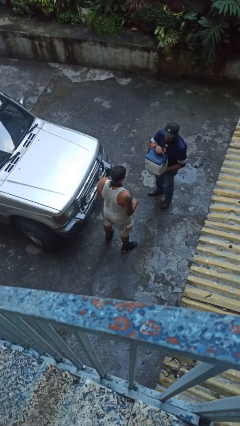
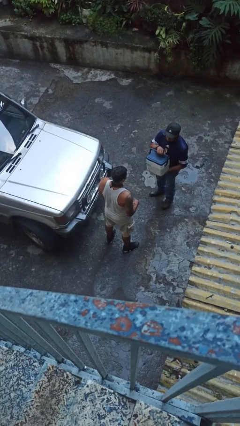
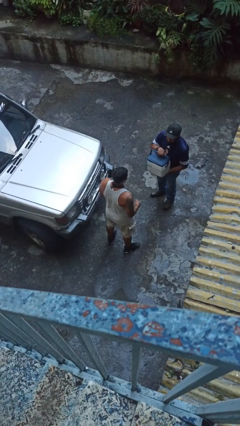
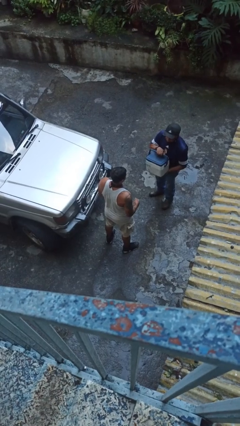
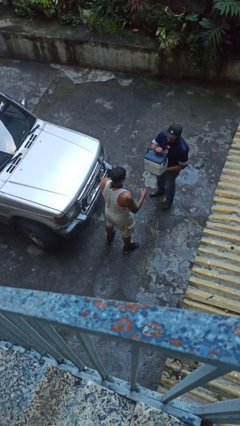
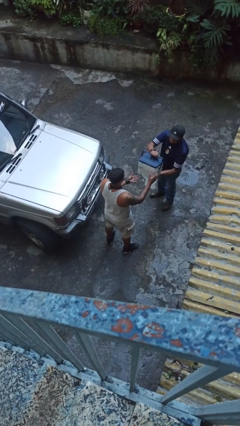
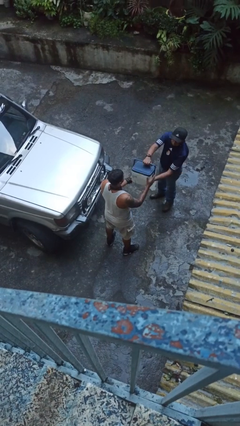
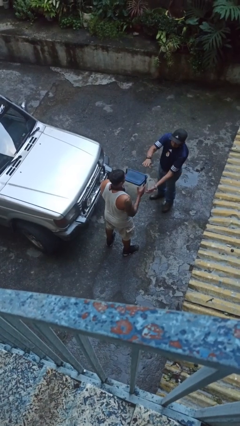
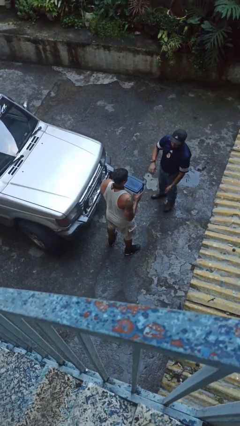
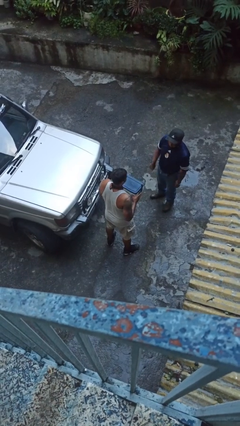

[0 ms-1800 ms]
person transfers object to person

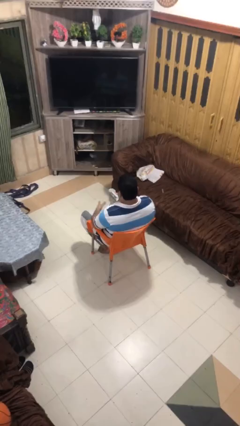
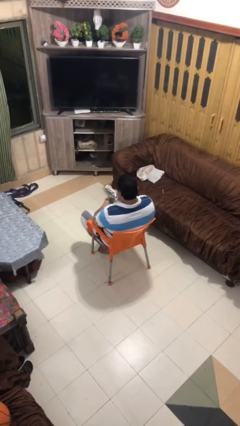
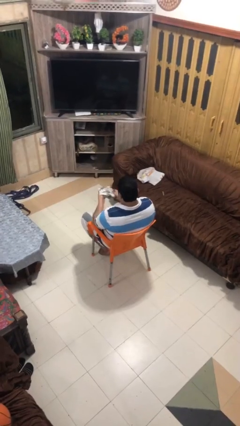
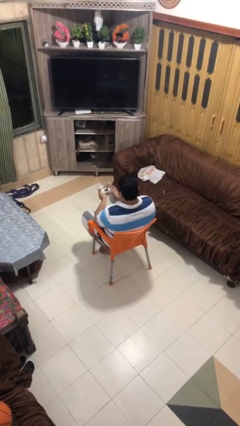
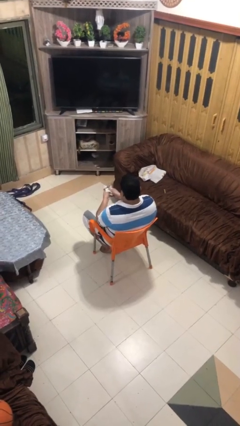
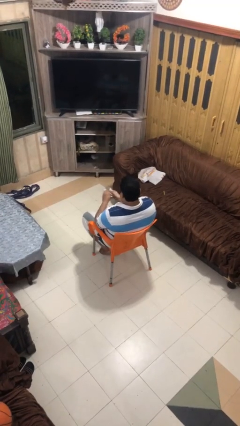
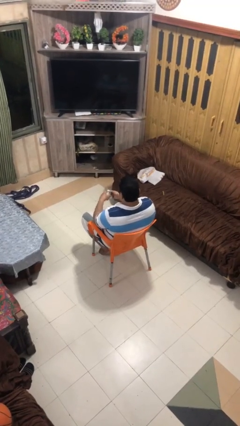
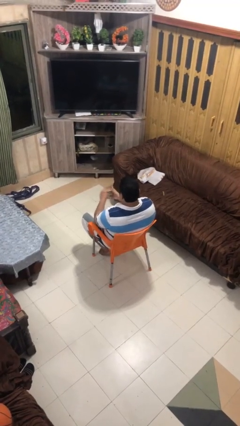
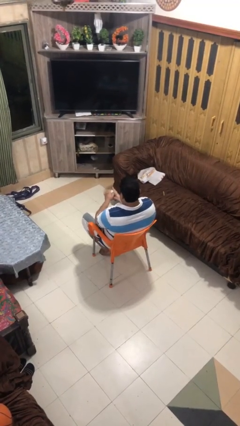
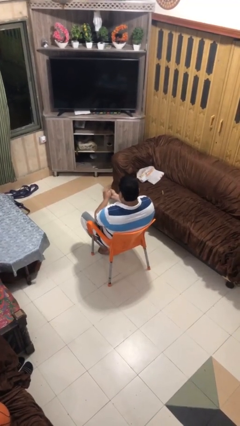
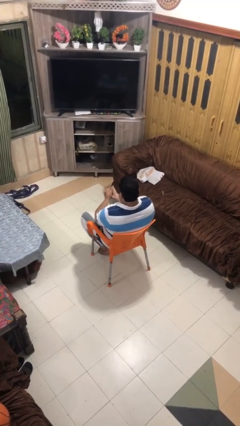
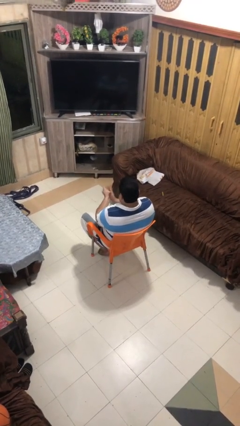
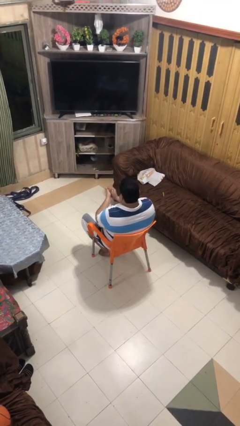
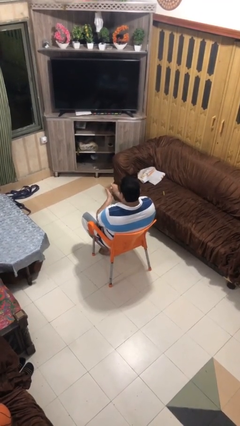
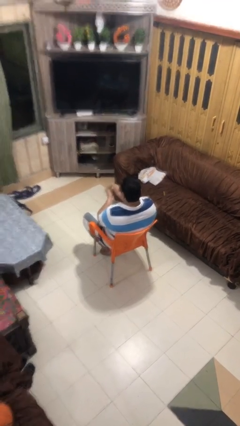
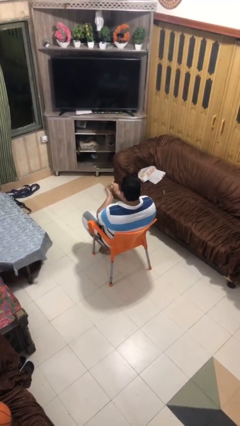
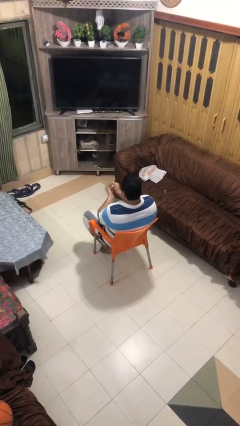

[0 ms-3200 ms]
person crumples paper

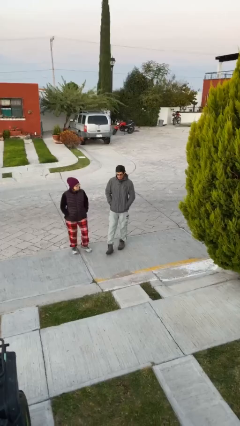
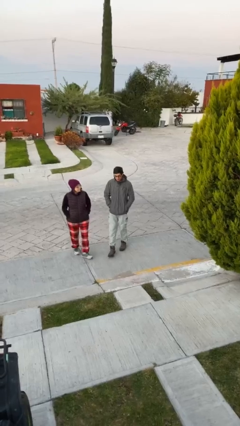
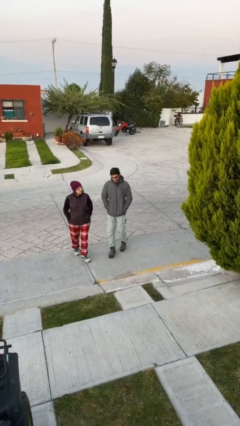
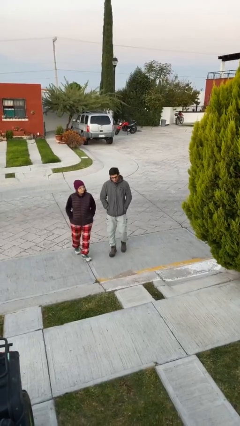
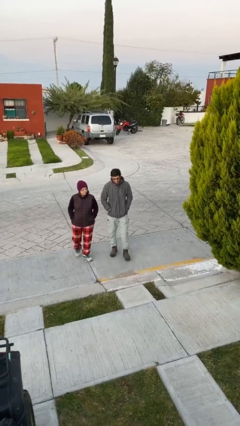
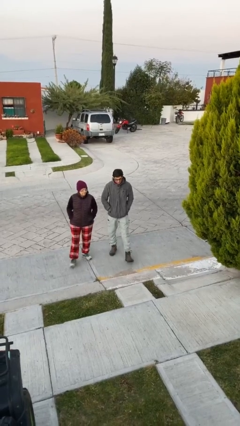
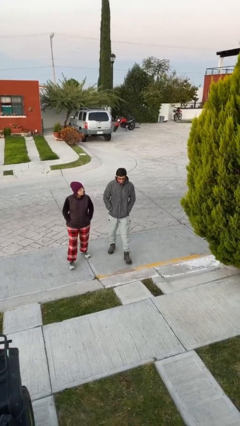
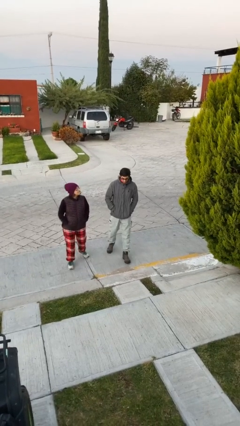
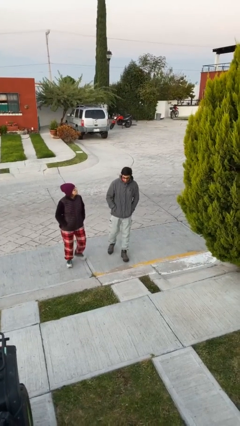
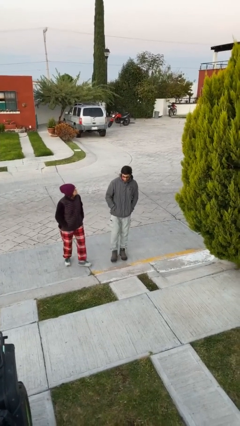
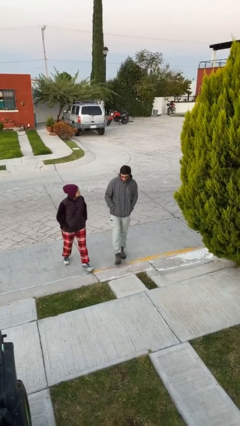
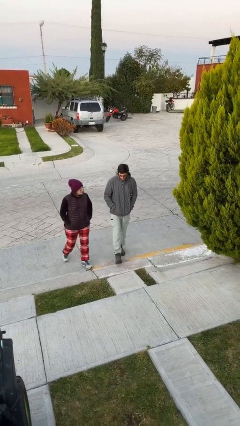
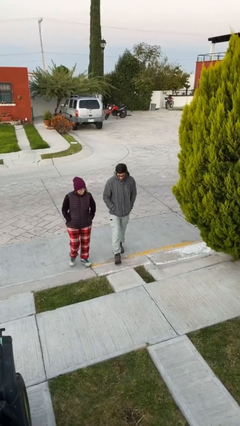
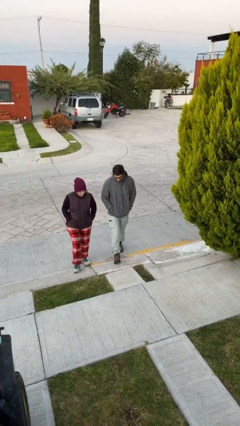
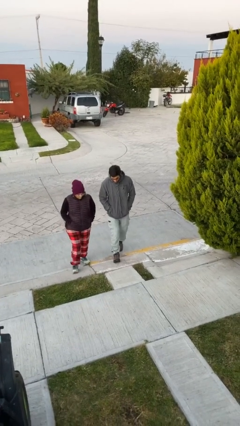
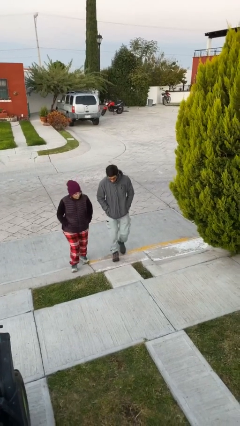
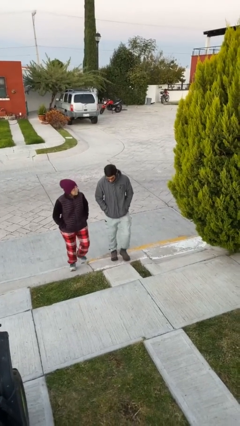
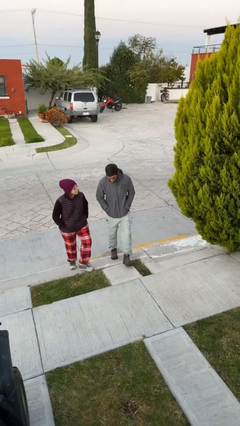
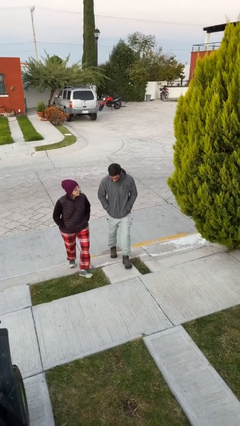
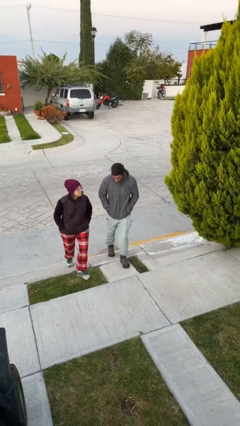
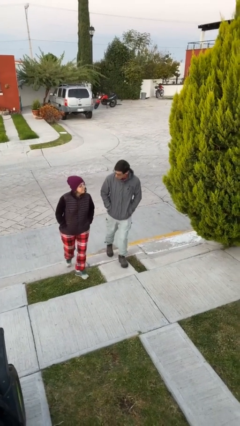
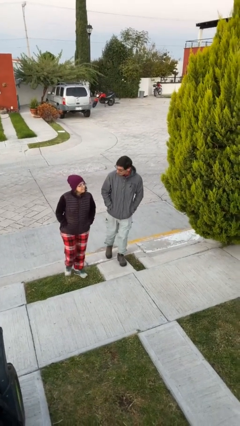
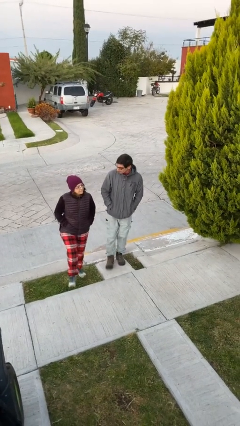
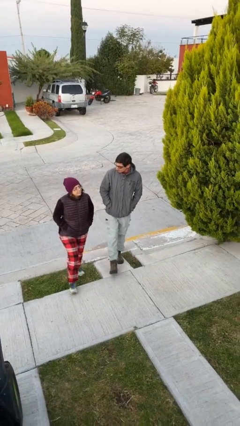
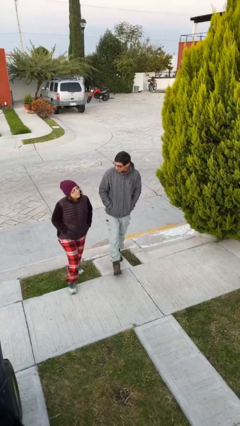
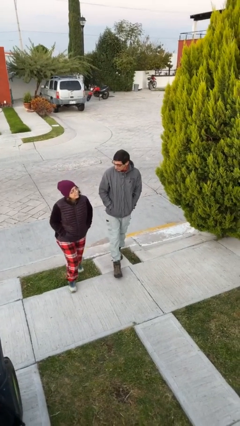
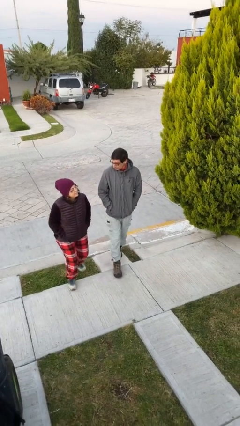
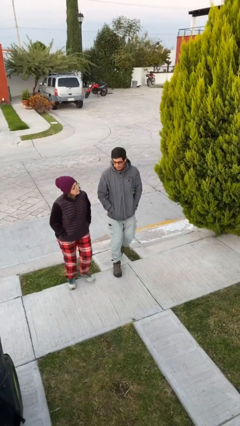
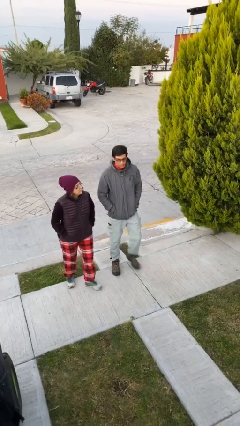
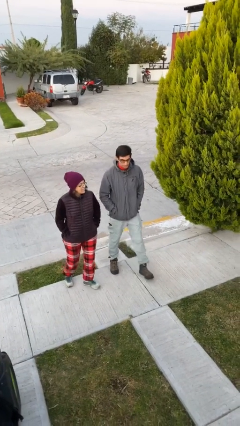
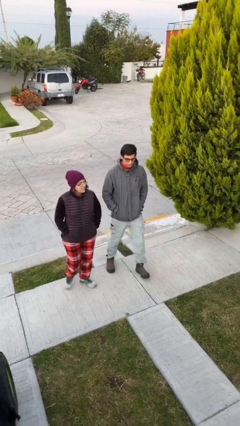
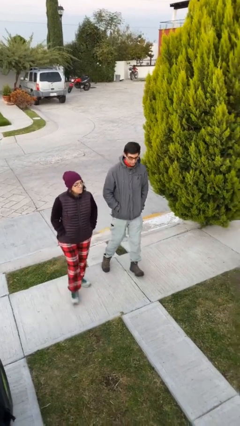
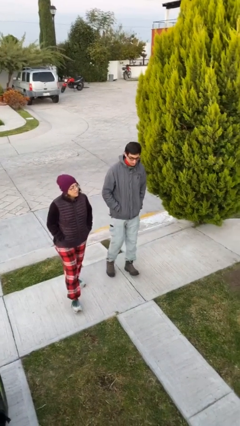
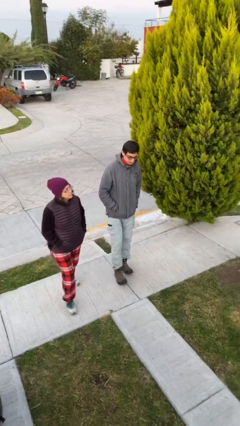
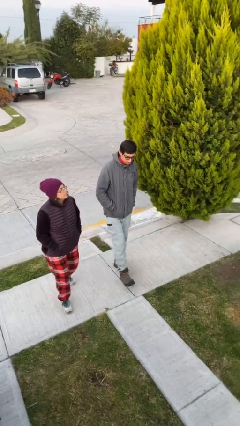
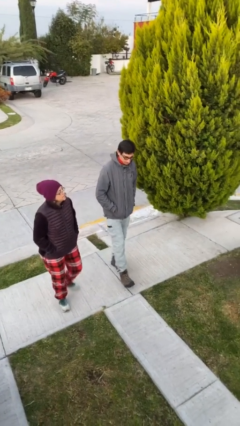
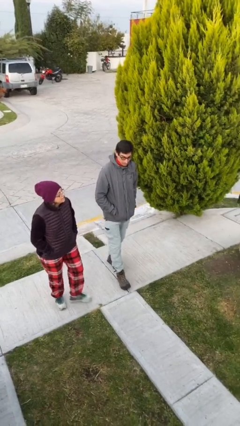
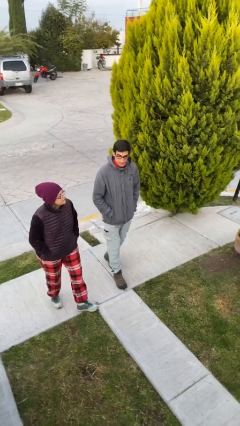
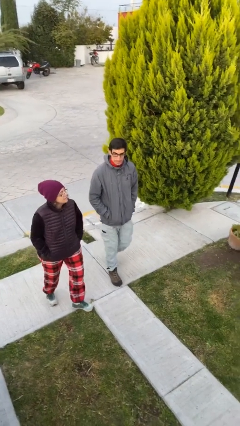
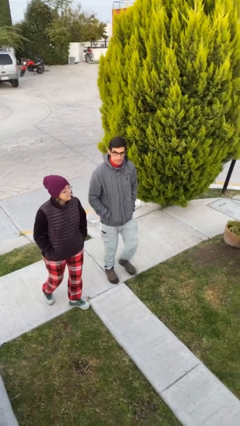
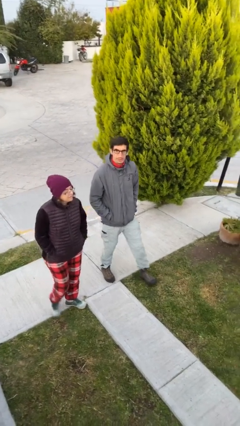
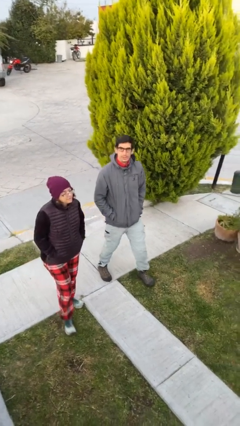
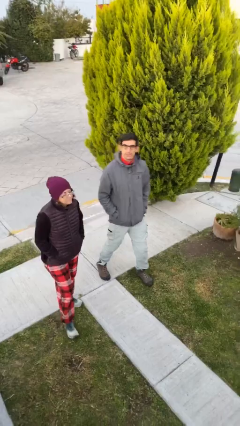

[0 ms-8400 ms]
person talks to person

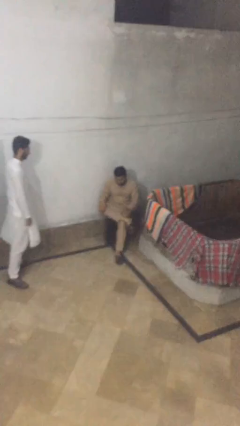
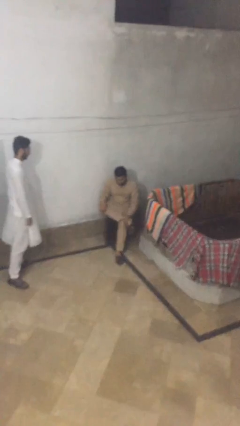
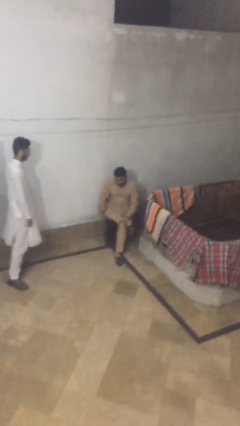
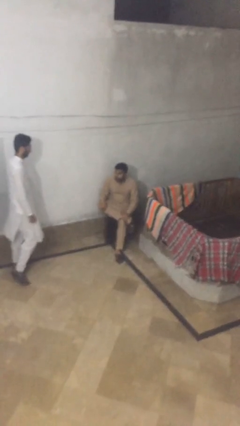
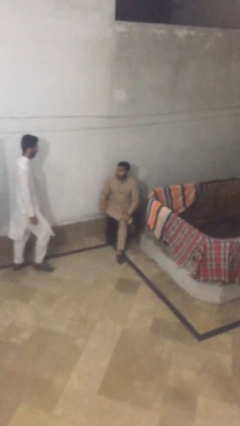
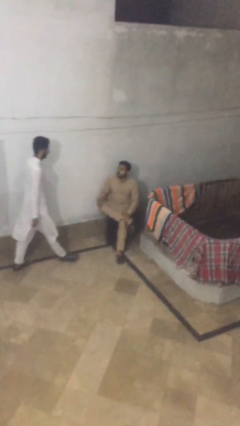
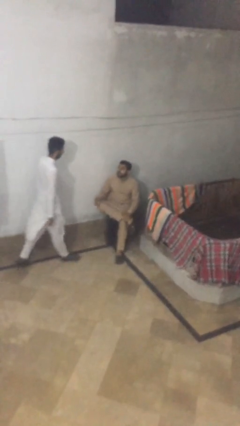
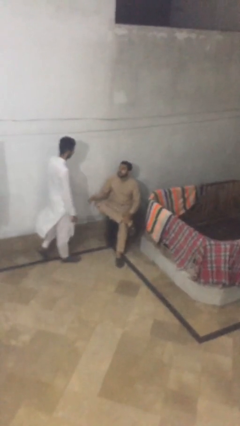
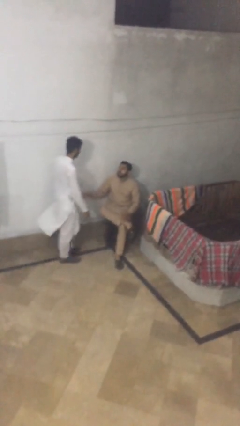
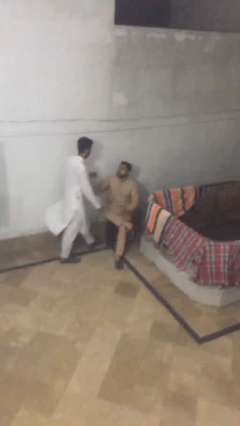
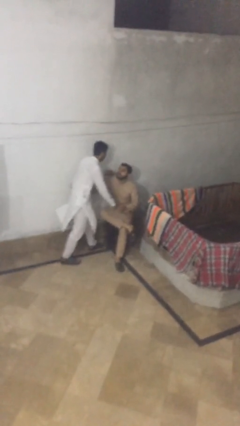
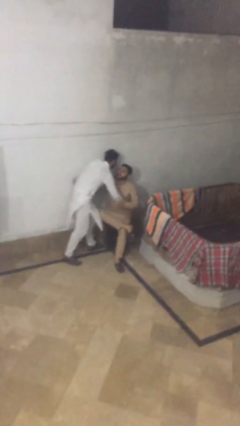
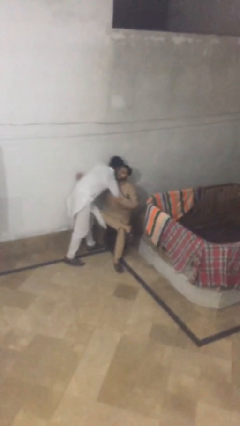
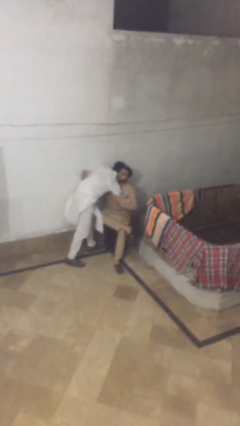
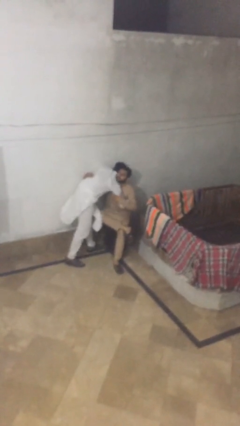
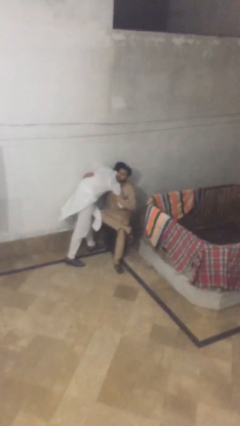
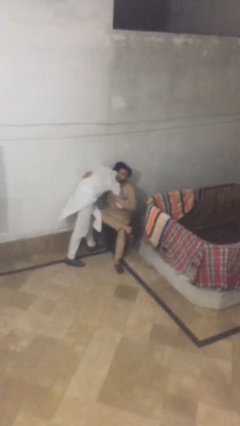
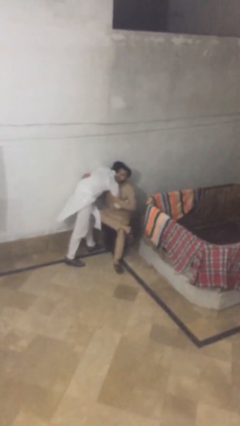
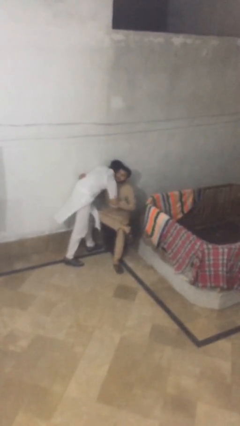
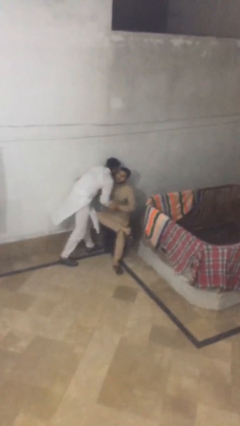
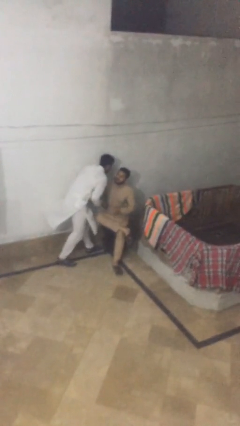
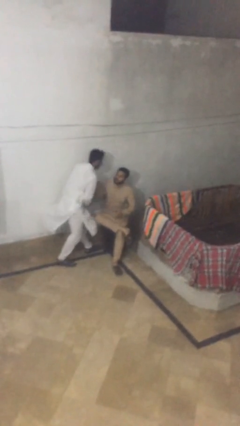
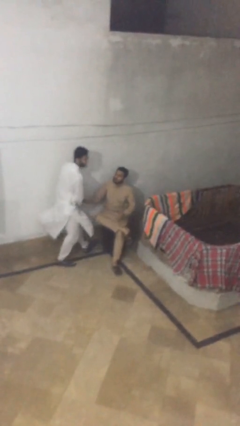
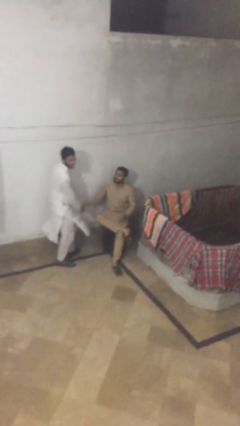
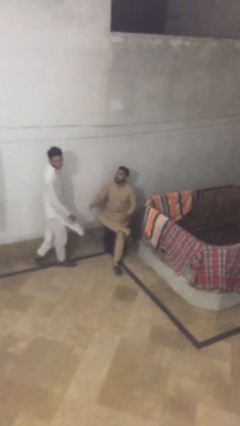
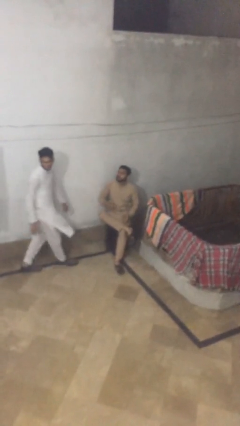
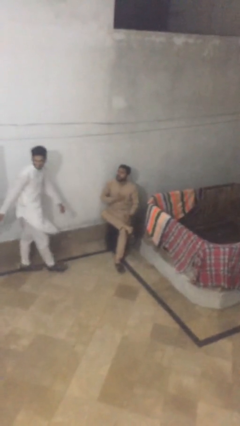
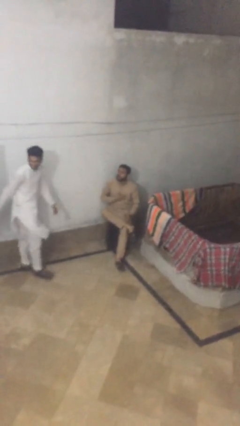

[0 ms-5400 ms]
person embraces person
